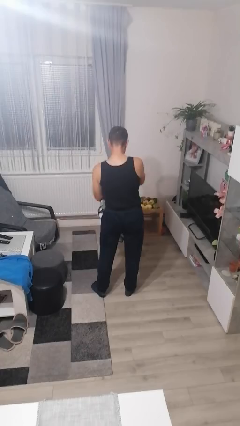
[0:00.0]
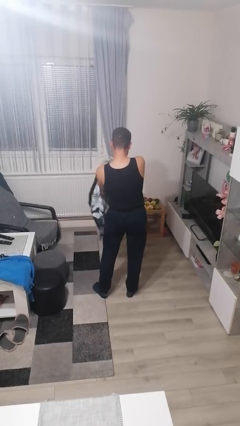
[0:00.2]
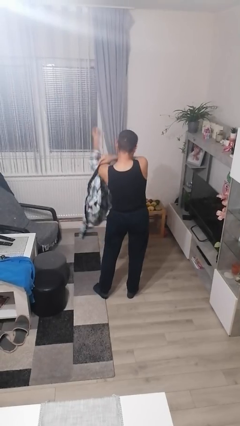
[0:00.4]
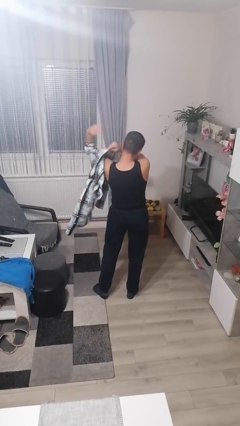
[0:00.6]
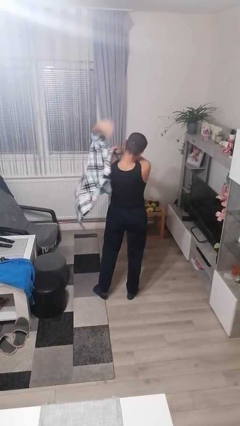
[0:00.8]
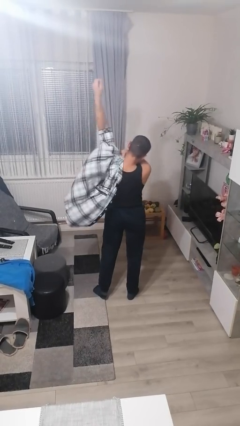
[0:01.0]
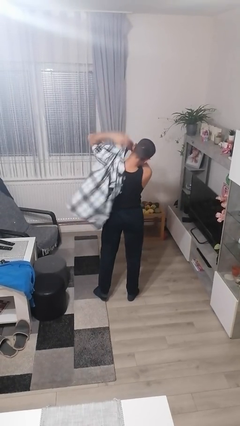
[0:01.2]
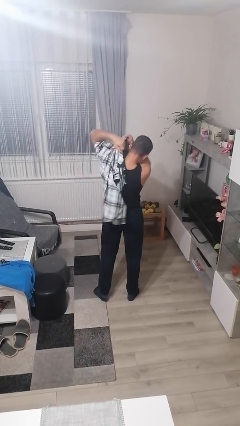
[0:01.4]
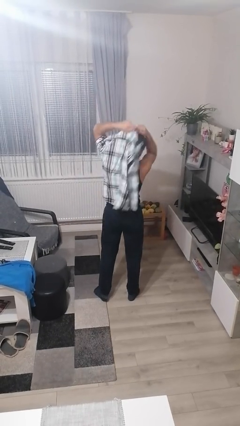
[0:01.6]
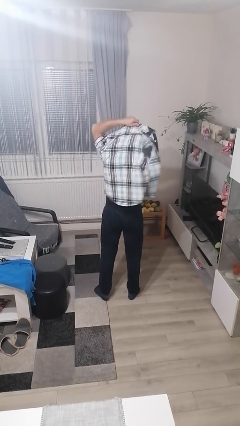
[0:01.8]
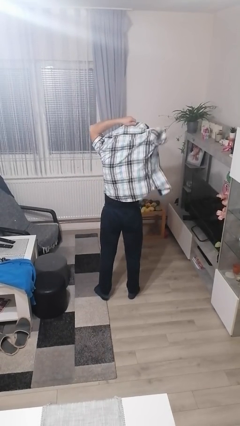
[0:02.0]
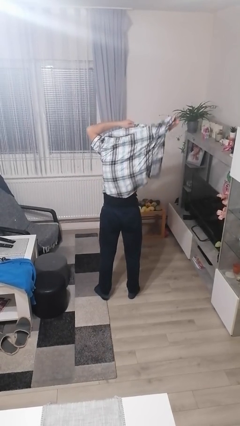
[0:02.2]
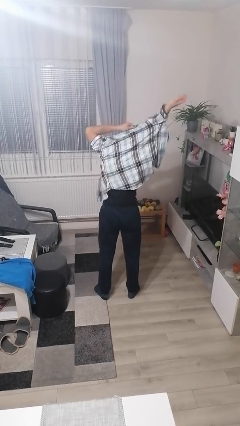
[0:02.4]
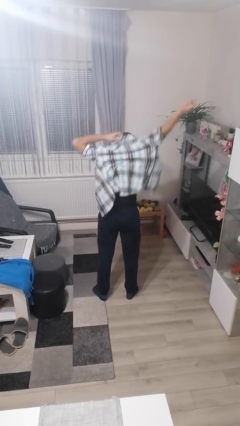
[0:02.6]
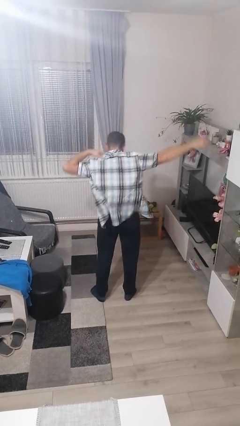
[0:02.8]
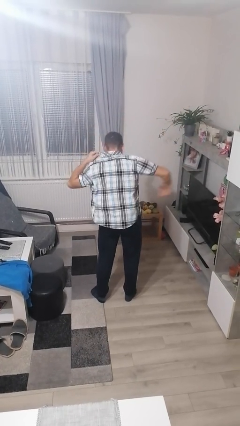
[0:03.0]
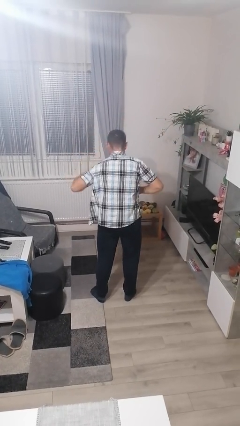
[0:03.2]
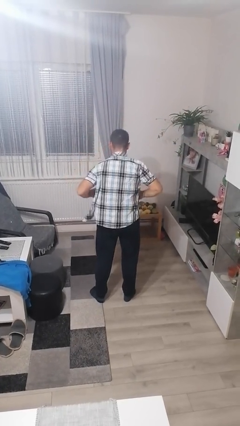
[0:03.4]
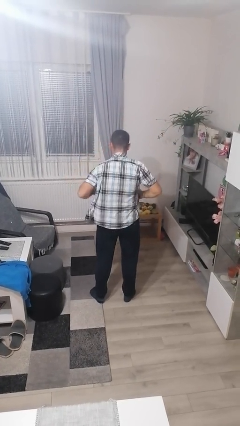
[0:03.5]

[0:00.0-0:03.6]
person puts on shirt

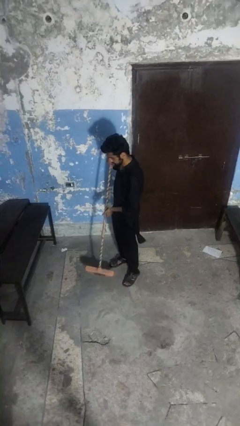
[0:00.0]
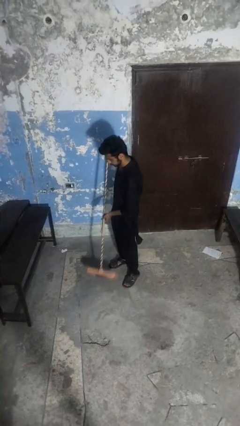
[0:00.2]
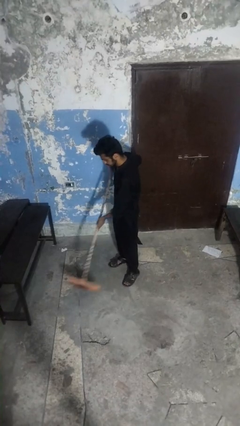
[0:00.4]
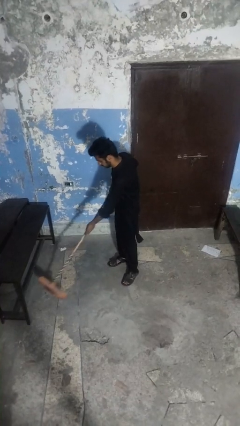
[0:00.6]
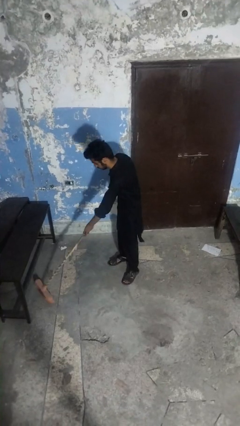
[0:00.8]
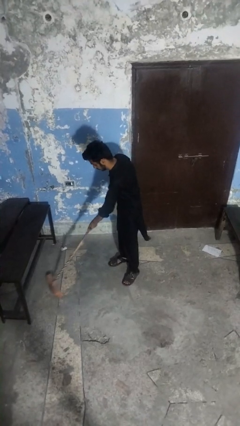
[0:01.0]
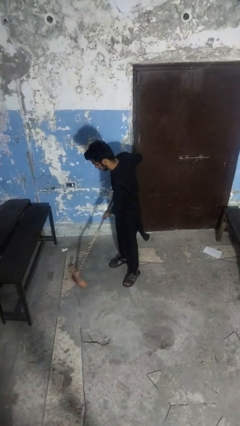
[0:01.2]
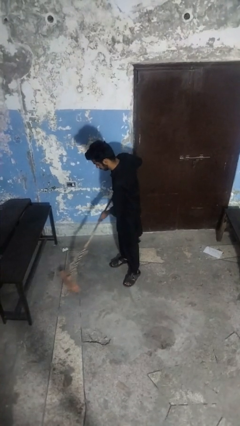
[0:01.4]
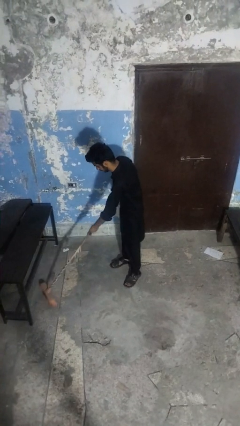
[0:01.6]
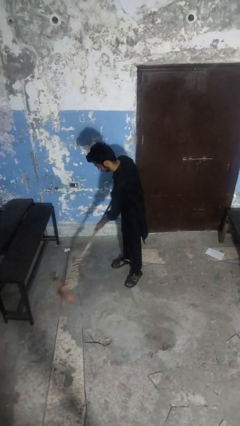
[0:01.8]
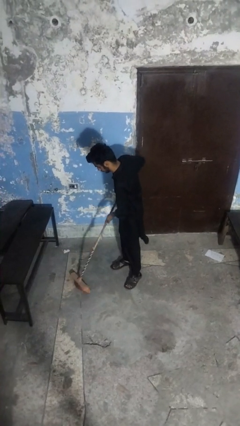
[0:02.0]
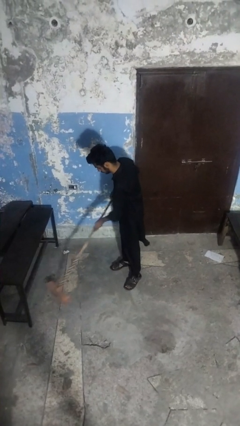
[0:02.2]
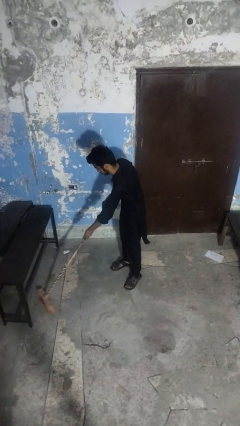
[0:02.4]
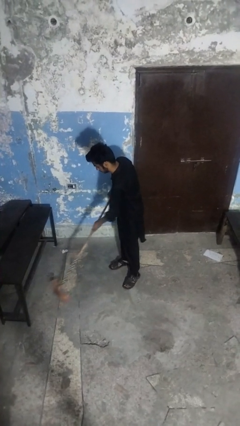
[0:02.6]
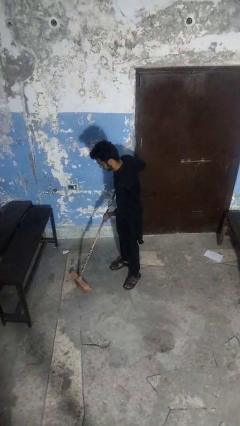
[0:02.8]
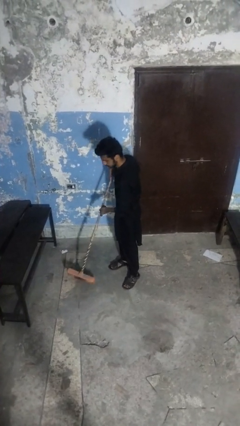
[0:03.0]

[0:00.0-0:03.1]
person sweeps floor

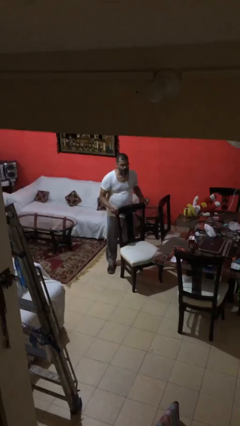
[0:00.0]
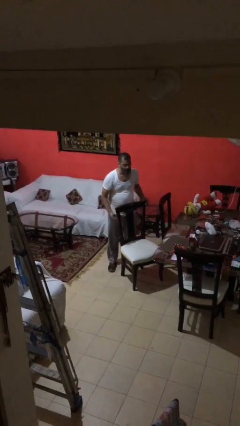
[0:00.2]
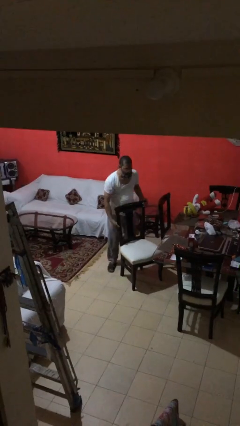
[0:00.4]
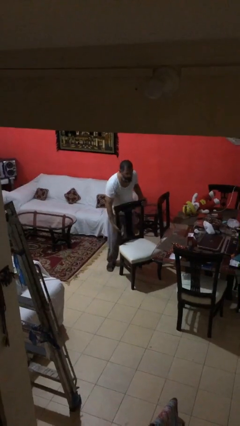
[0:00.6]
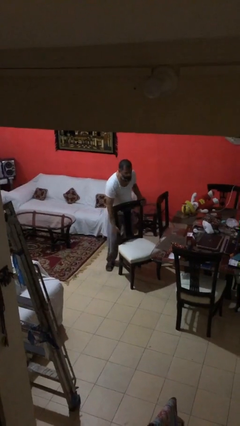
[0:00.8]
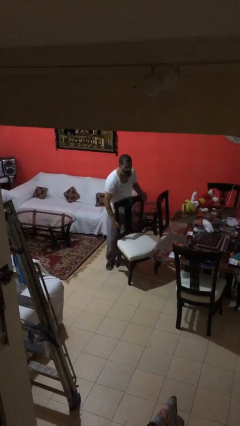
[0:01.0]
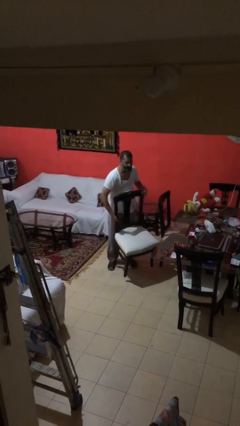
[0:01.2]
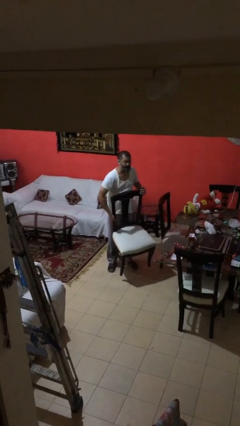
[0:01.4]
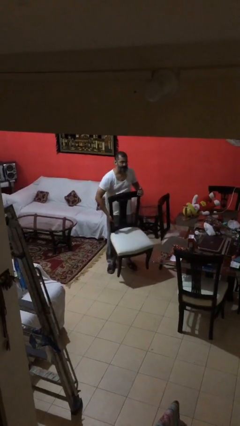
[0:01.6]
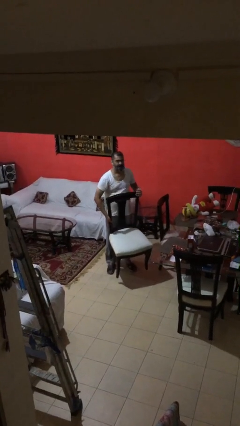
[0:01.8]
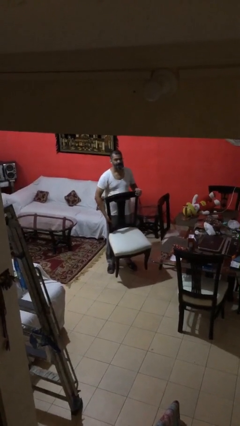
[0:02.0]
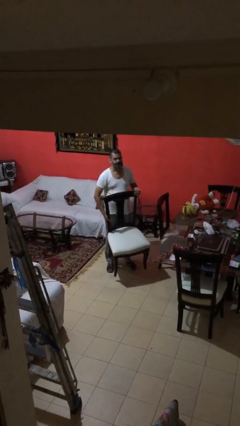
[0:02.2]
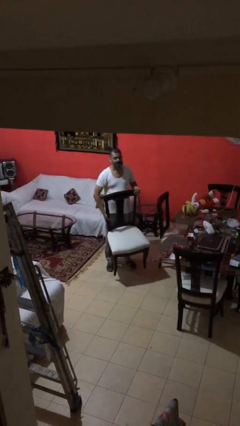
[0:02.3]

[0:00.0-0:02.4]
person picks up object from floor

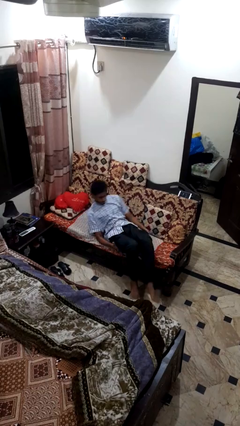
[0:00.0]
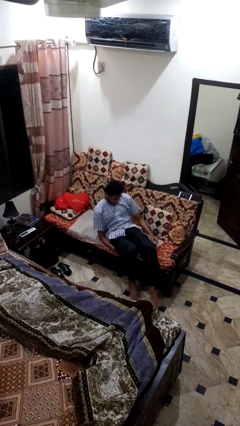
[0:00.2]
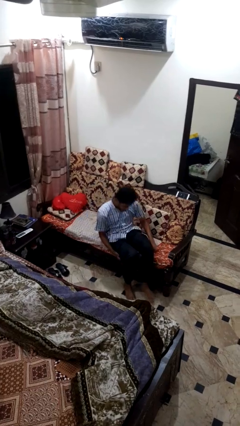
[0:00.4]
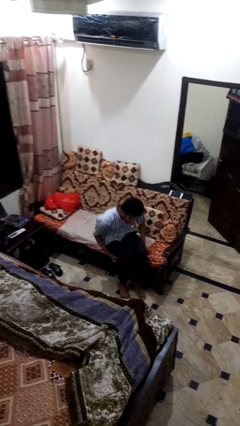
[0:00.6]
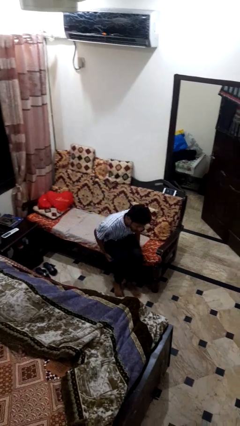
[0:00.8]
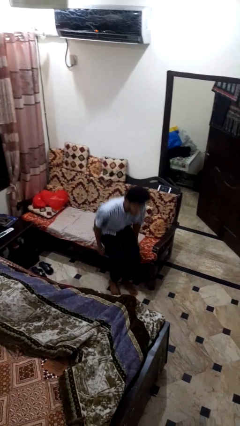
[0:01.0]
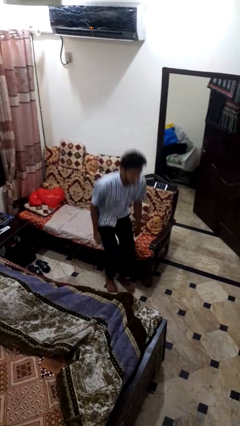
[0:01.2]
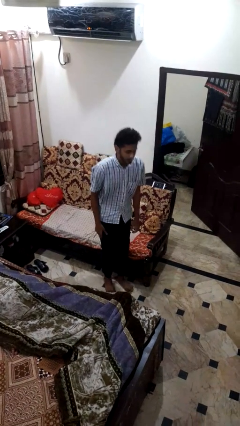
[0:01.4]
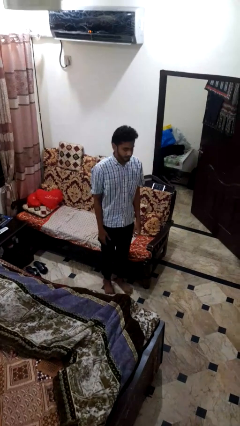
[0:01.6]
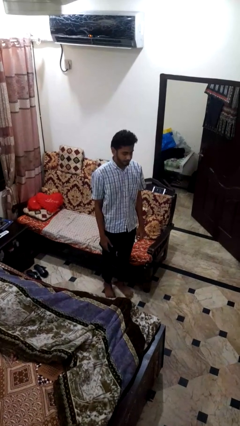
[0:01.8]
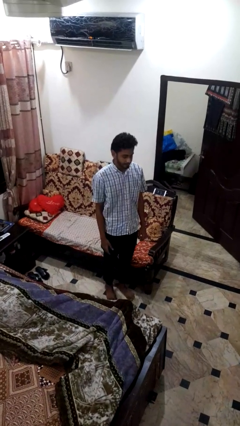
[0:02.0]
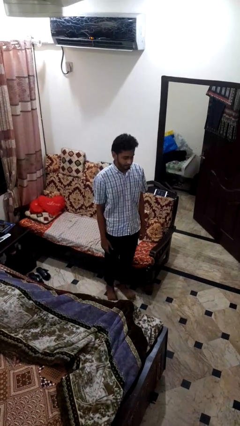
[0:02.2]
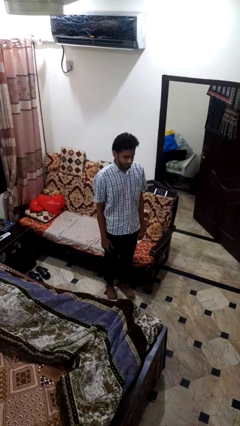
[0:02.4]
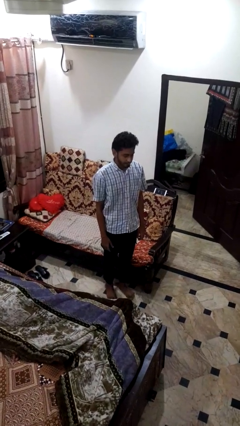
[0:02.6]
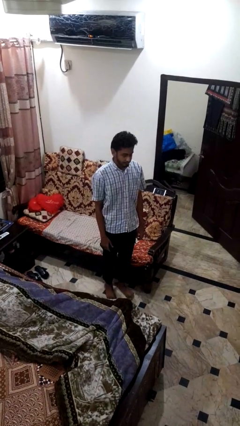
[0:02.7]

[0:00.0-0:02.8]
person stands up

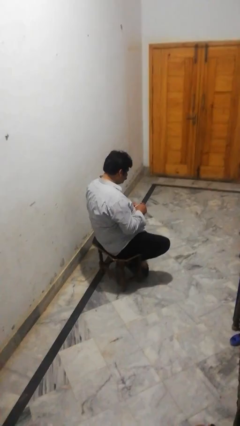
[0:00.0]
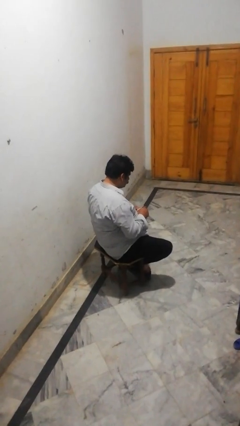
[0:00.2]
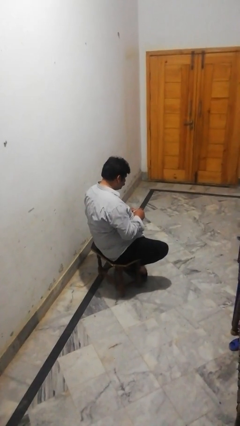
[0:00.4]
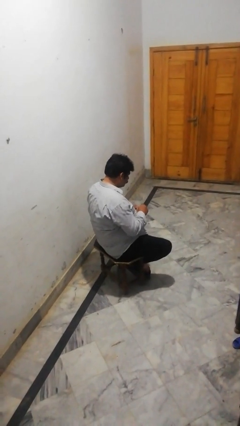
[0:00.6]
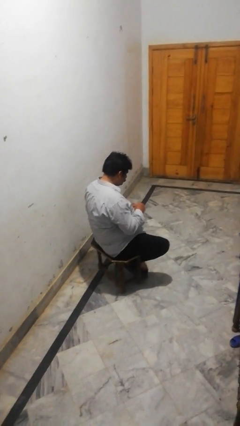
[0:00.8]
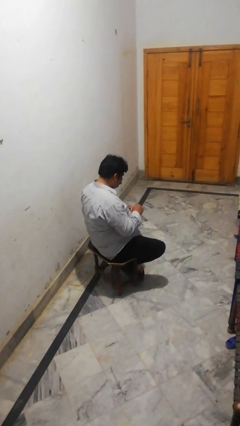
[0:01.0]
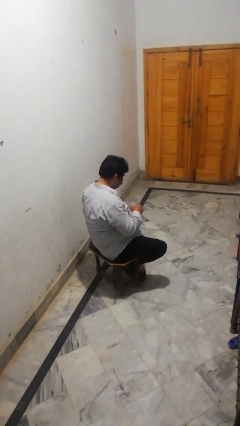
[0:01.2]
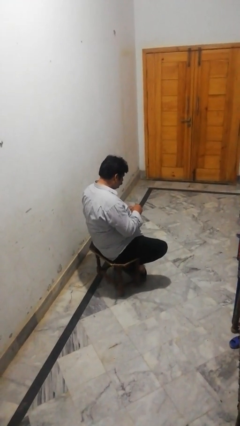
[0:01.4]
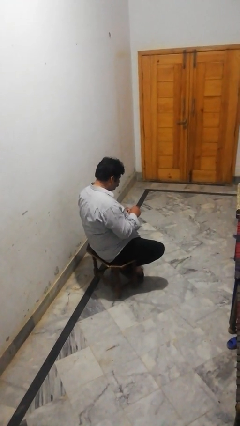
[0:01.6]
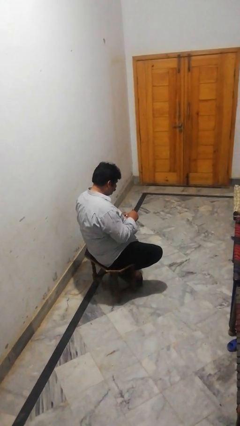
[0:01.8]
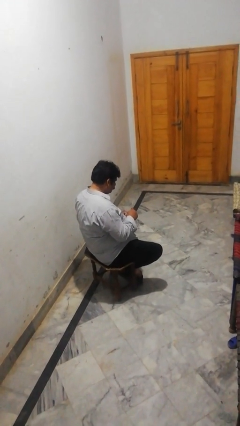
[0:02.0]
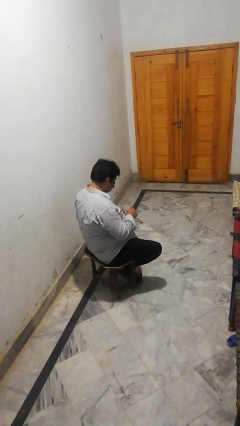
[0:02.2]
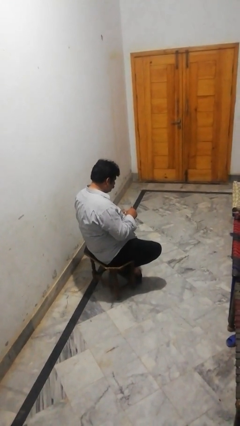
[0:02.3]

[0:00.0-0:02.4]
person stirs mug

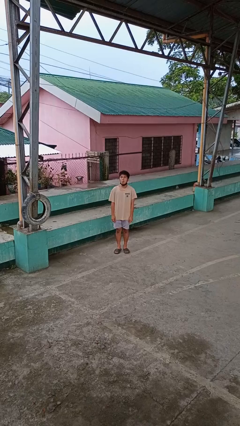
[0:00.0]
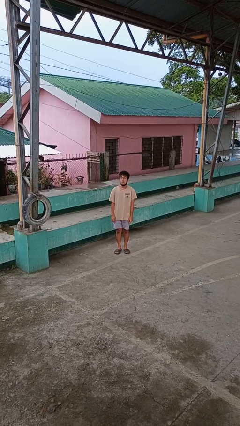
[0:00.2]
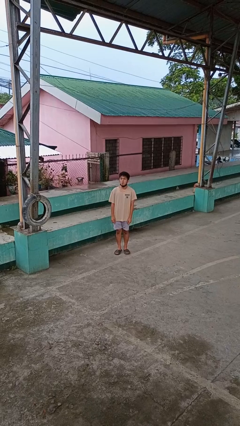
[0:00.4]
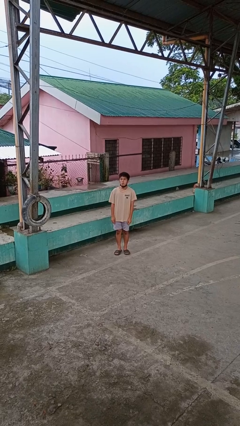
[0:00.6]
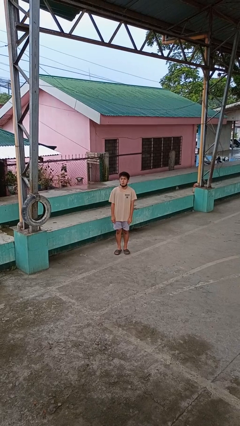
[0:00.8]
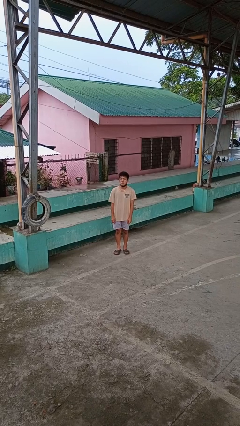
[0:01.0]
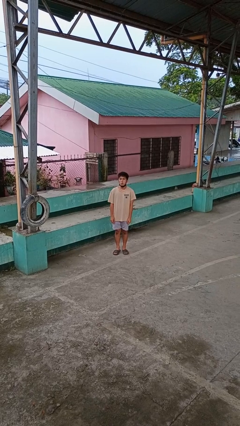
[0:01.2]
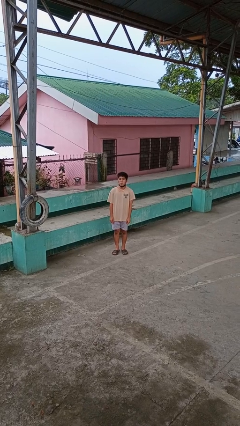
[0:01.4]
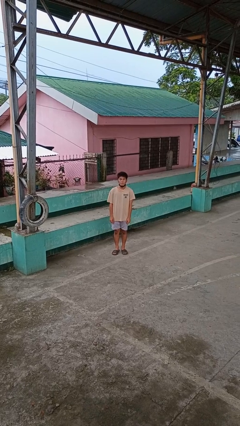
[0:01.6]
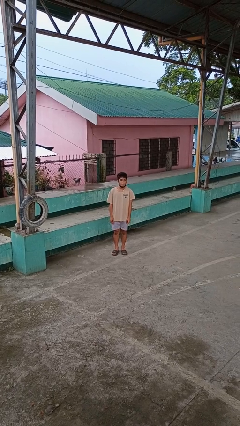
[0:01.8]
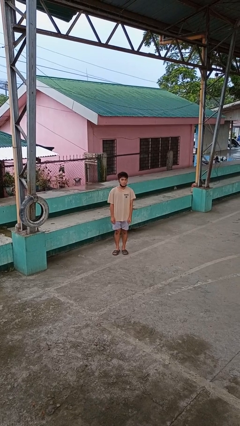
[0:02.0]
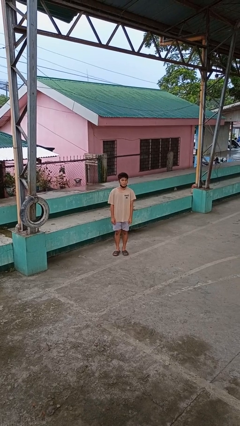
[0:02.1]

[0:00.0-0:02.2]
person sticks out tongue

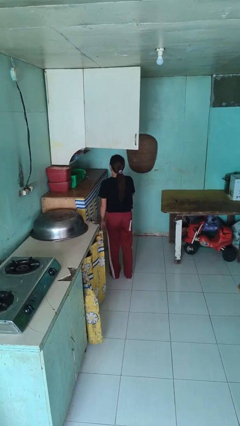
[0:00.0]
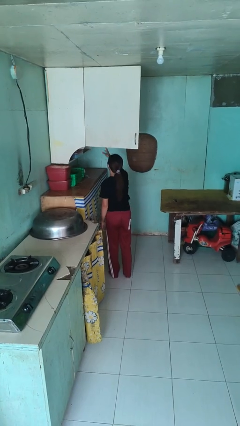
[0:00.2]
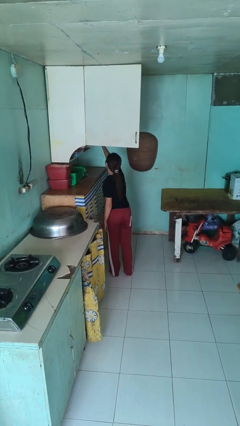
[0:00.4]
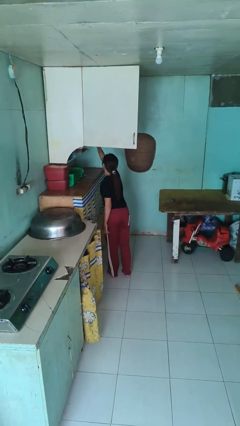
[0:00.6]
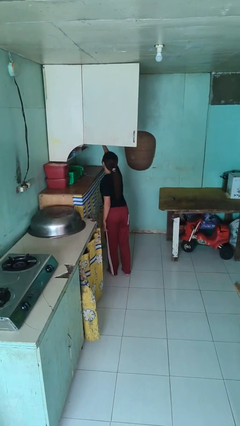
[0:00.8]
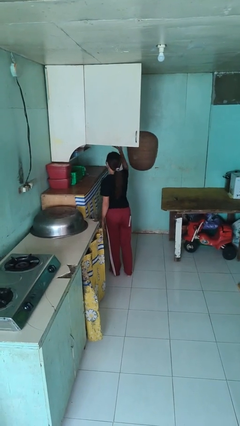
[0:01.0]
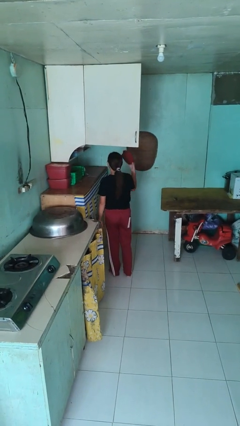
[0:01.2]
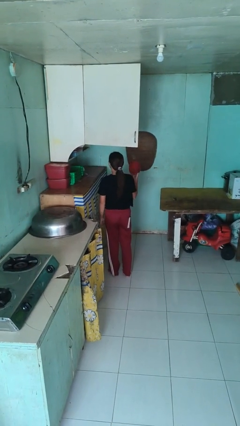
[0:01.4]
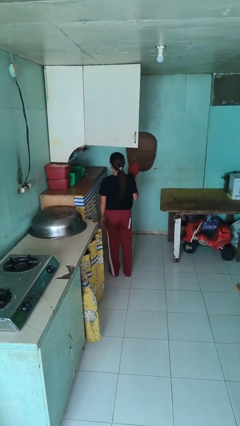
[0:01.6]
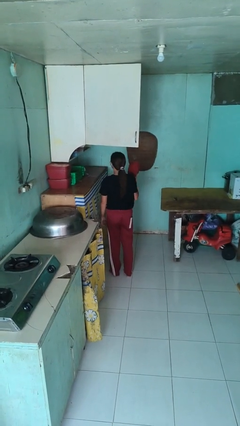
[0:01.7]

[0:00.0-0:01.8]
person takes object from cabinet
